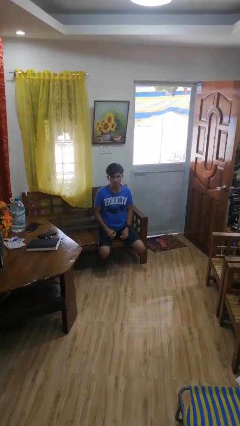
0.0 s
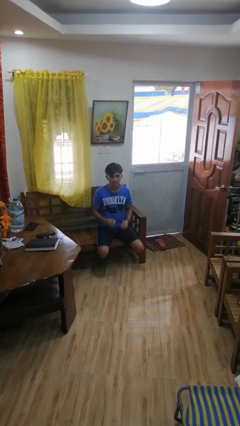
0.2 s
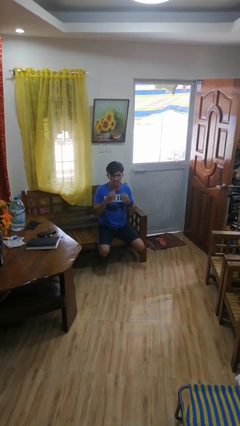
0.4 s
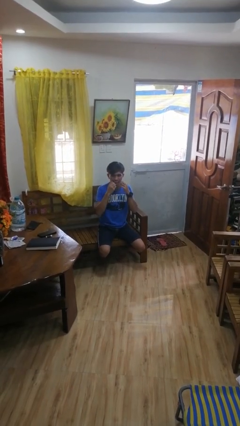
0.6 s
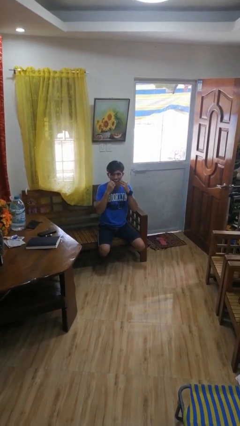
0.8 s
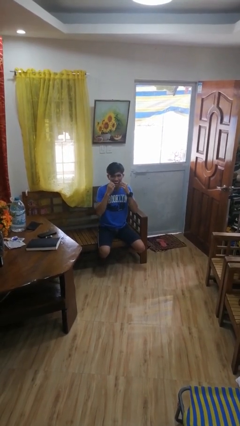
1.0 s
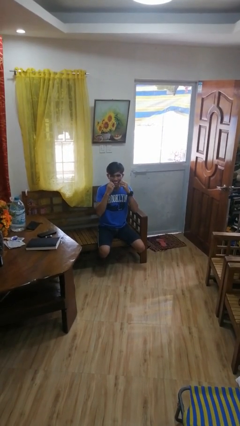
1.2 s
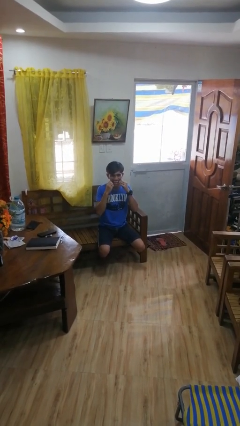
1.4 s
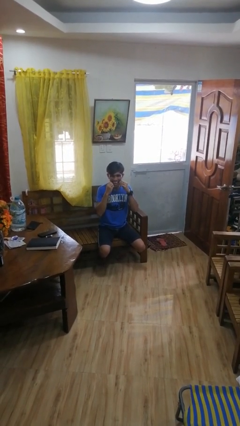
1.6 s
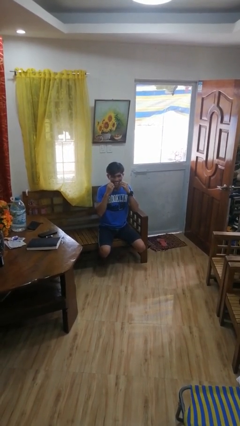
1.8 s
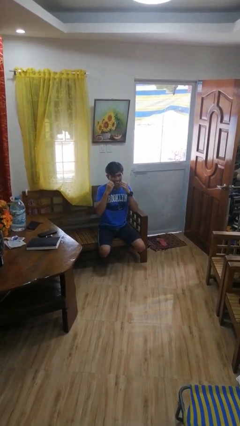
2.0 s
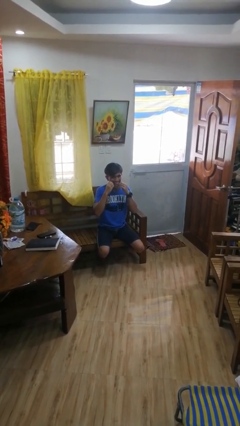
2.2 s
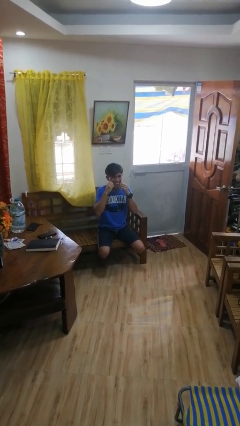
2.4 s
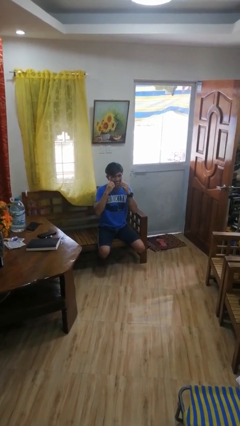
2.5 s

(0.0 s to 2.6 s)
person flosses

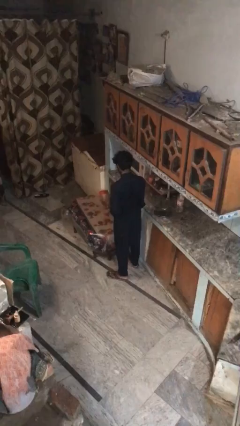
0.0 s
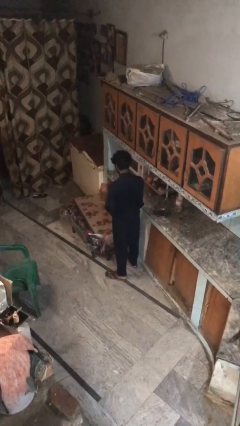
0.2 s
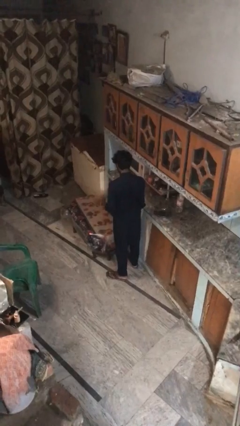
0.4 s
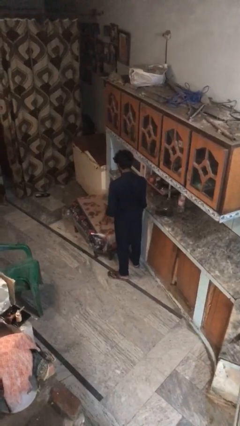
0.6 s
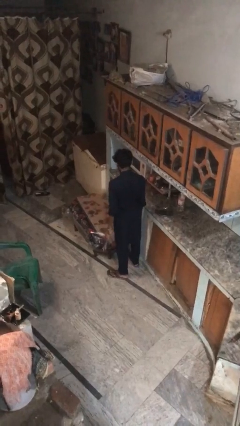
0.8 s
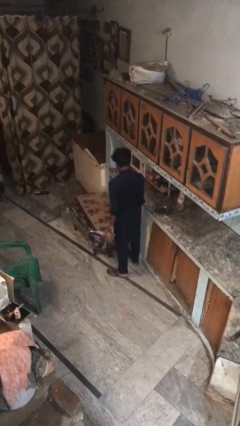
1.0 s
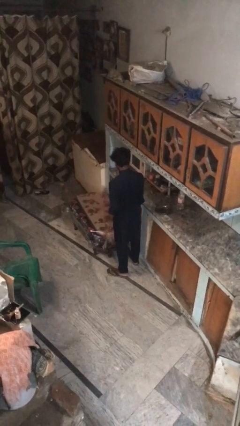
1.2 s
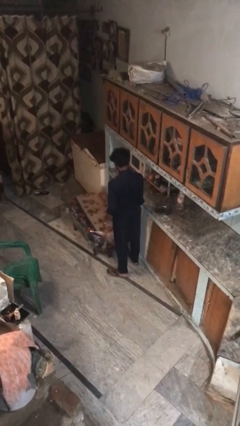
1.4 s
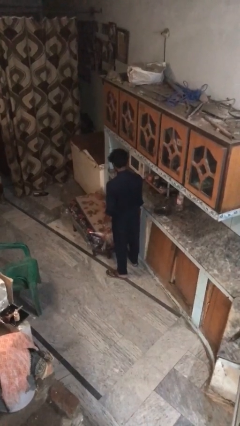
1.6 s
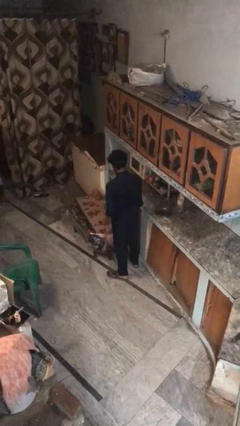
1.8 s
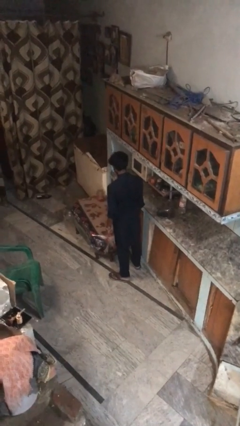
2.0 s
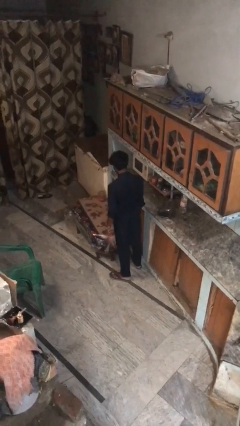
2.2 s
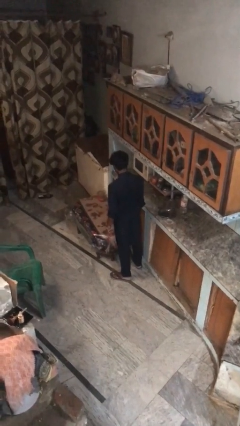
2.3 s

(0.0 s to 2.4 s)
person throws object on table

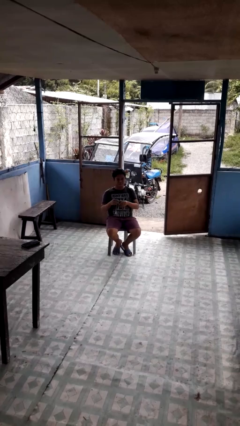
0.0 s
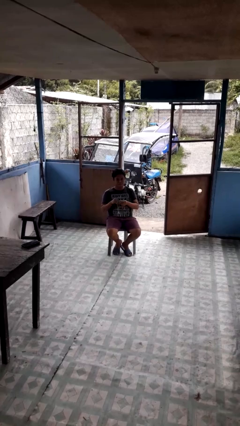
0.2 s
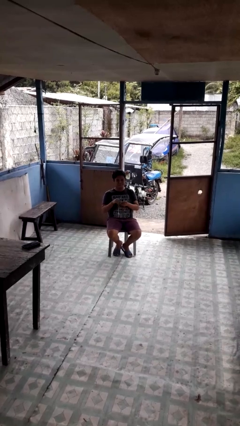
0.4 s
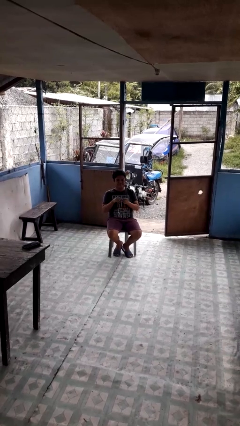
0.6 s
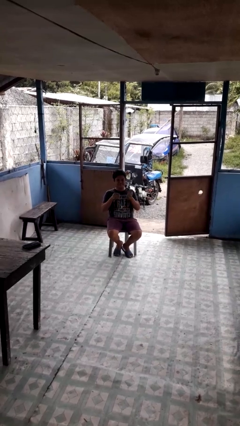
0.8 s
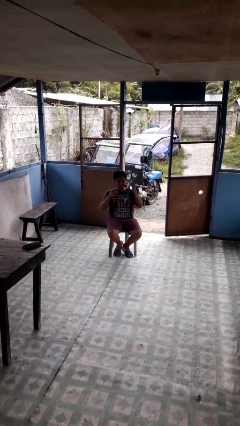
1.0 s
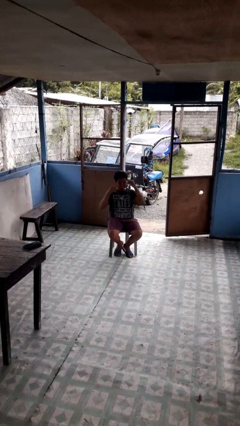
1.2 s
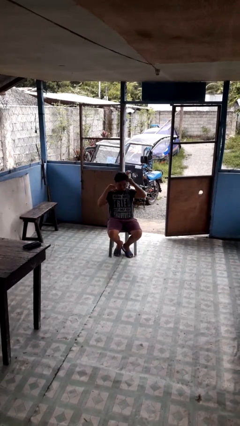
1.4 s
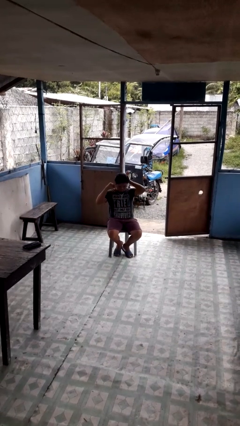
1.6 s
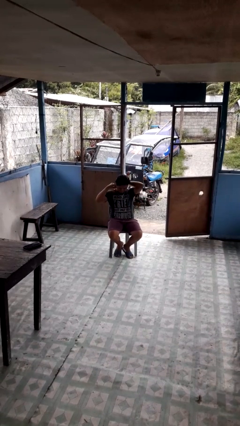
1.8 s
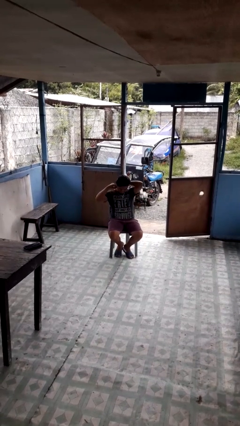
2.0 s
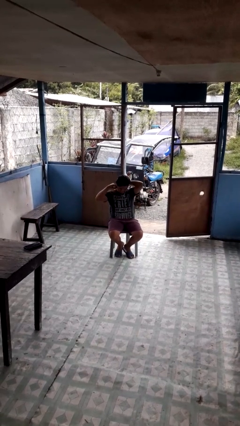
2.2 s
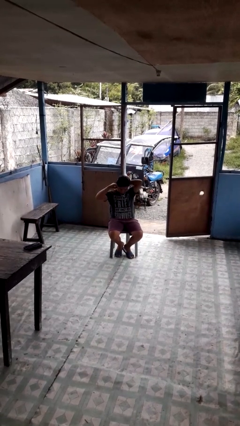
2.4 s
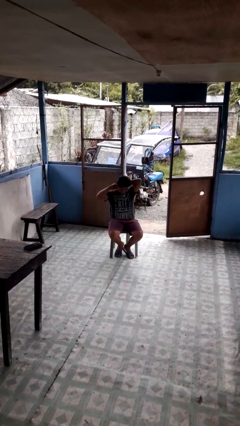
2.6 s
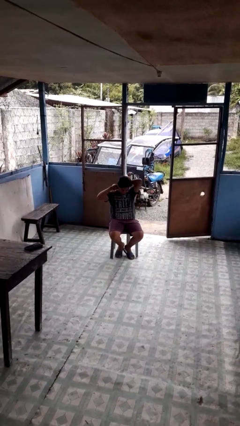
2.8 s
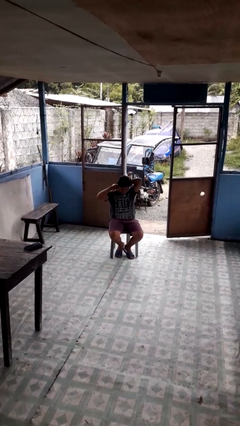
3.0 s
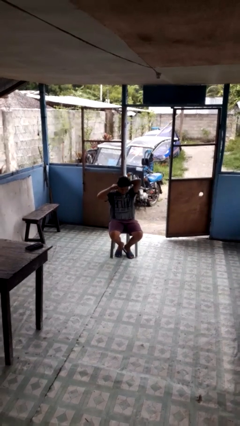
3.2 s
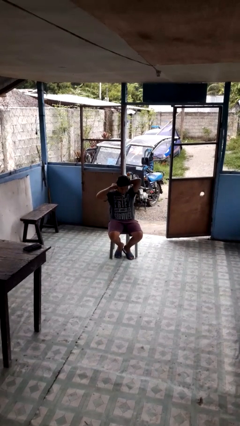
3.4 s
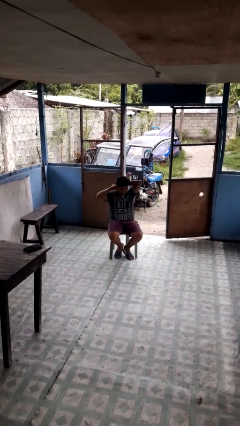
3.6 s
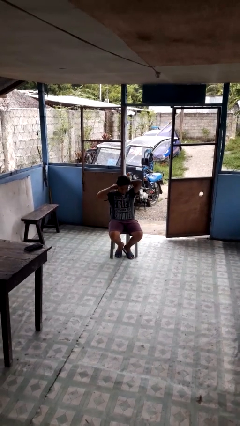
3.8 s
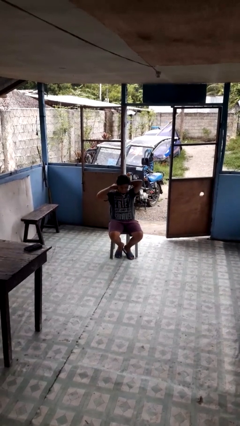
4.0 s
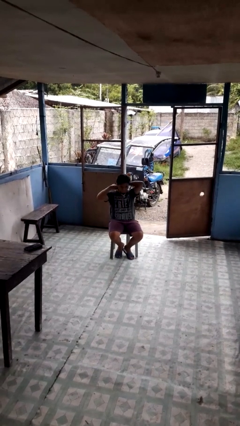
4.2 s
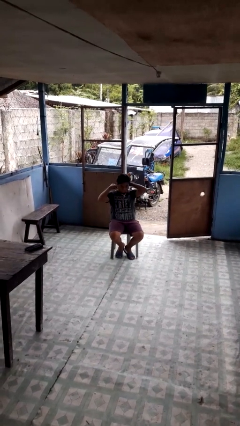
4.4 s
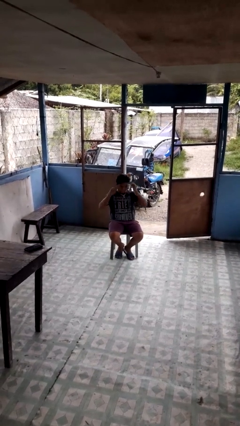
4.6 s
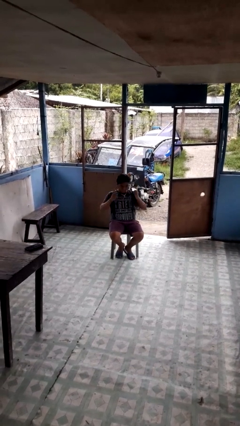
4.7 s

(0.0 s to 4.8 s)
person puts on necklace

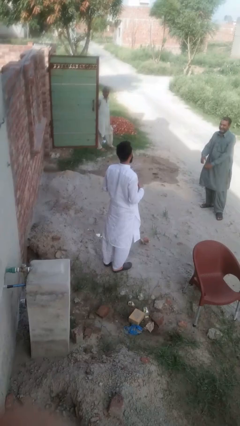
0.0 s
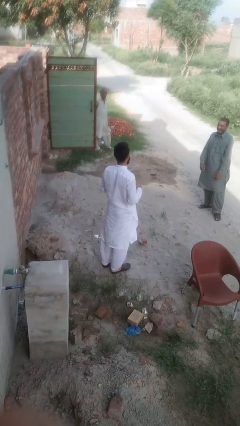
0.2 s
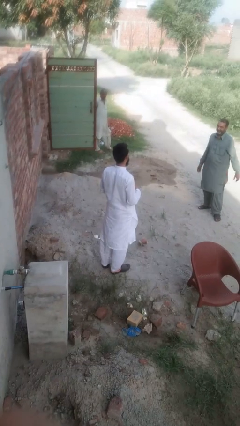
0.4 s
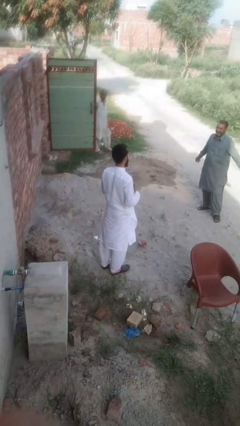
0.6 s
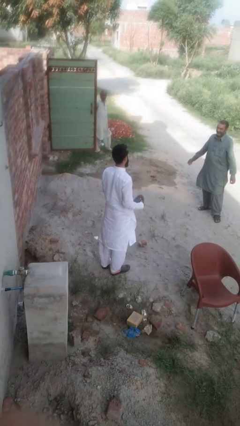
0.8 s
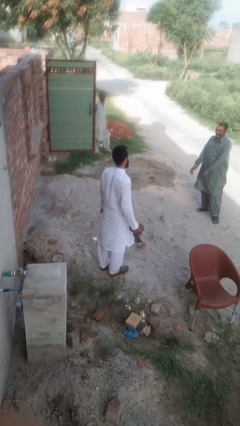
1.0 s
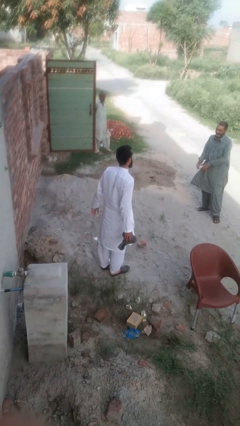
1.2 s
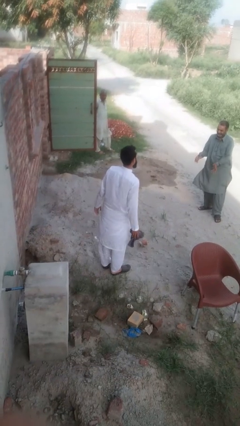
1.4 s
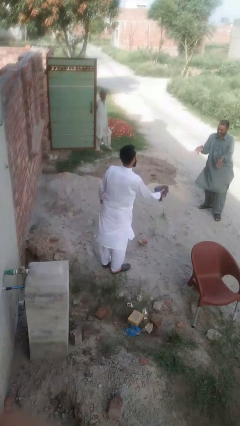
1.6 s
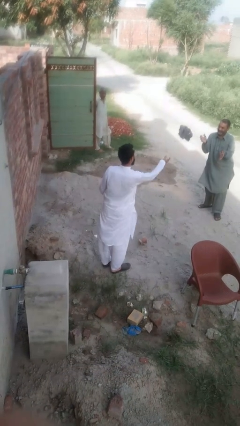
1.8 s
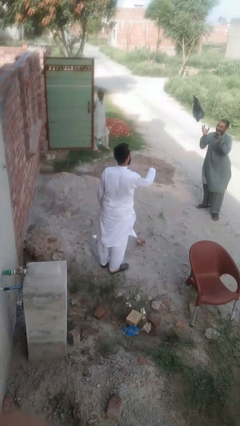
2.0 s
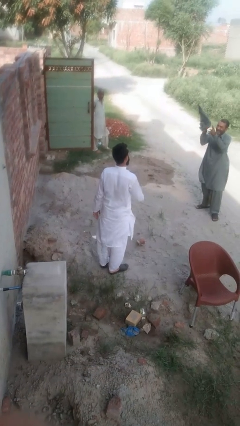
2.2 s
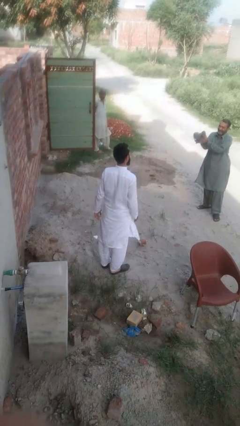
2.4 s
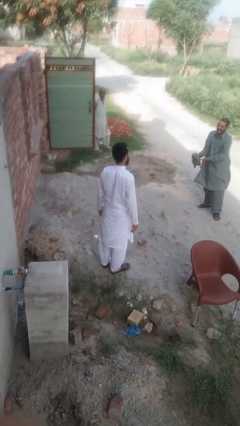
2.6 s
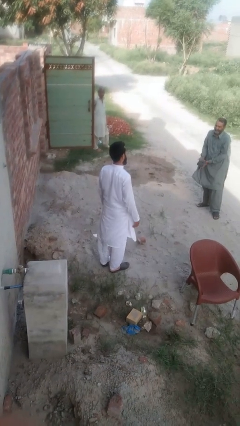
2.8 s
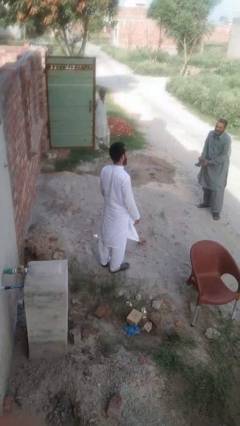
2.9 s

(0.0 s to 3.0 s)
person throws object to person

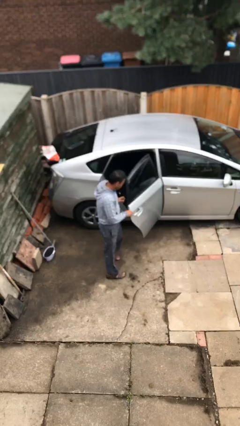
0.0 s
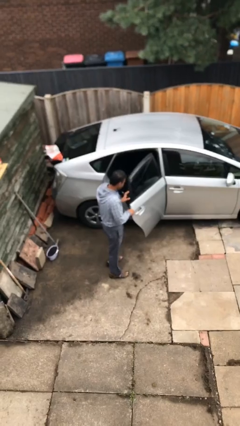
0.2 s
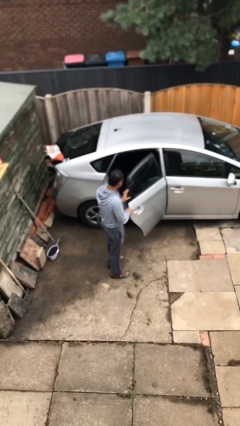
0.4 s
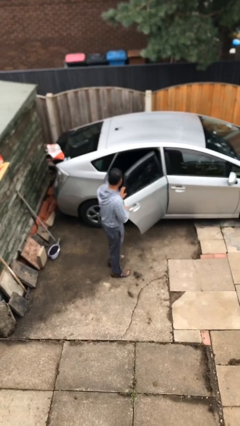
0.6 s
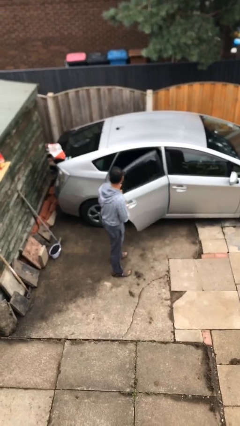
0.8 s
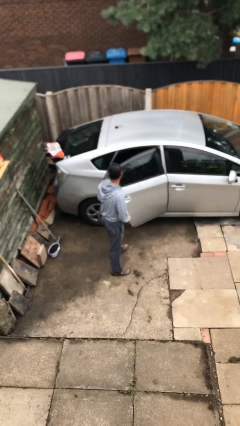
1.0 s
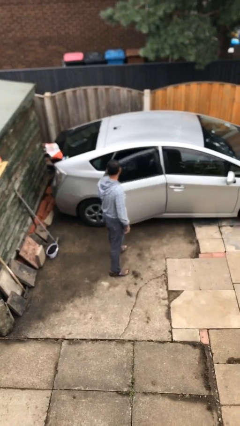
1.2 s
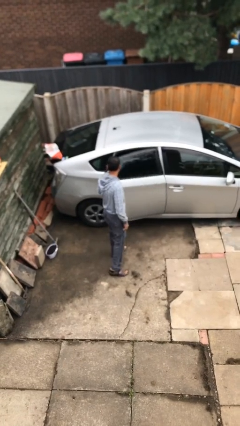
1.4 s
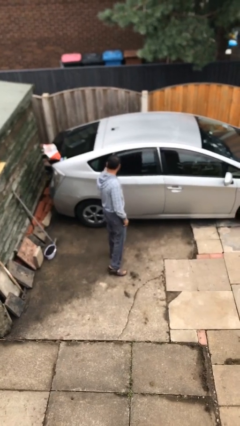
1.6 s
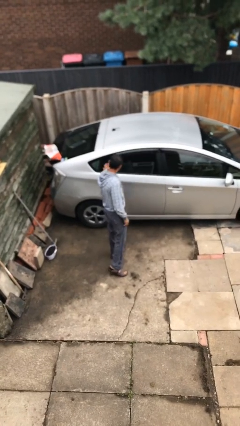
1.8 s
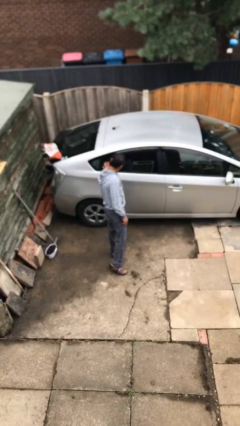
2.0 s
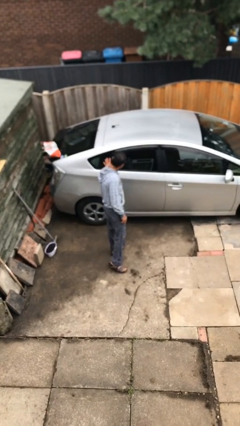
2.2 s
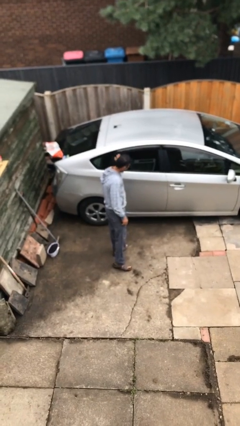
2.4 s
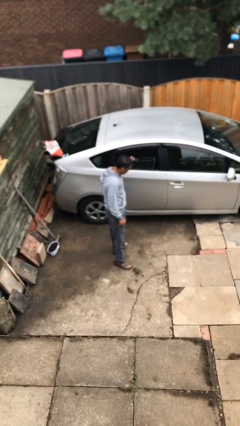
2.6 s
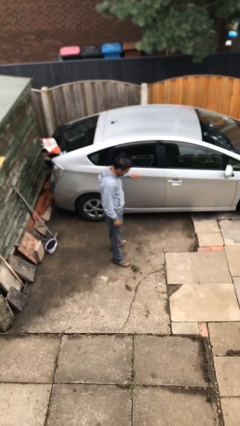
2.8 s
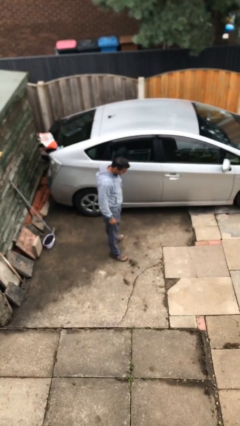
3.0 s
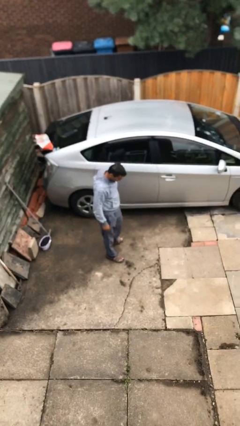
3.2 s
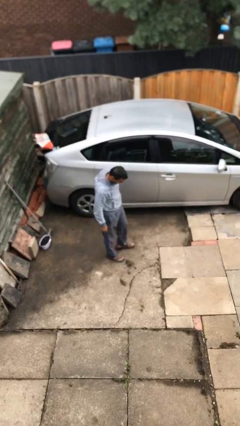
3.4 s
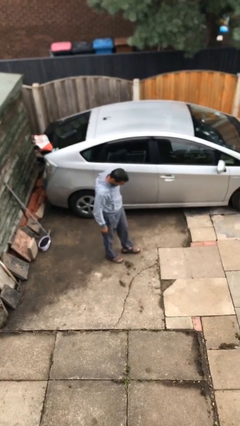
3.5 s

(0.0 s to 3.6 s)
person closes car door

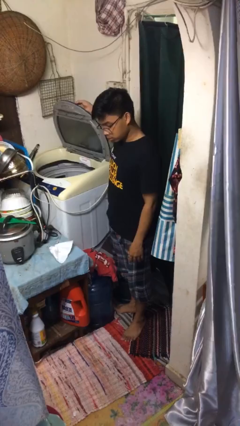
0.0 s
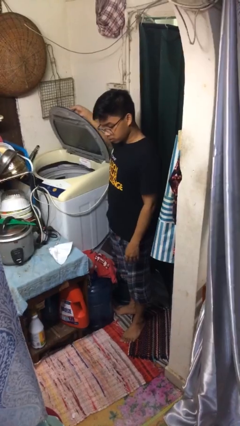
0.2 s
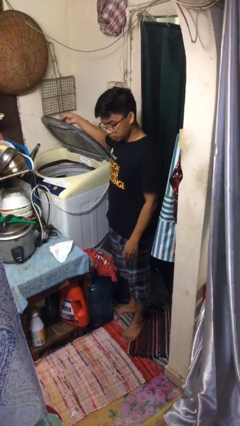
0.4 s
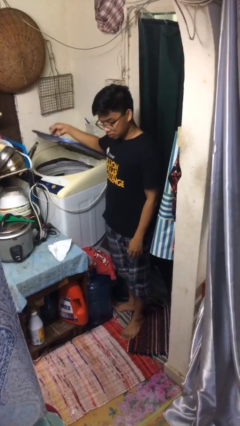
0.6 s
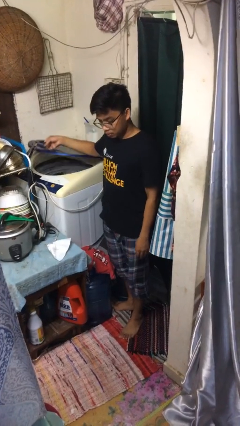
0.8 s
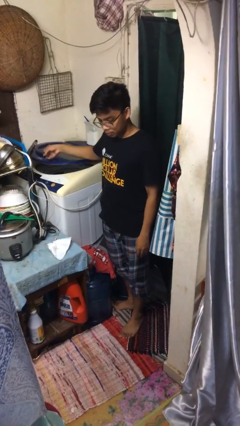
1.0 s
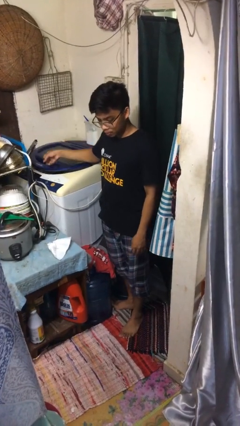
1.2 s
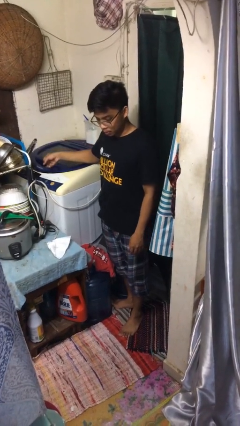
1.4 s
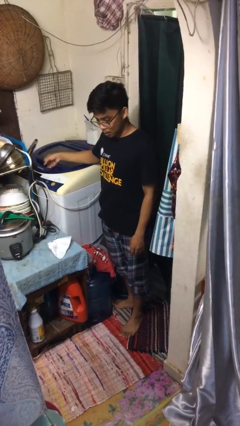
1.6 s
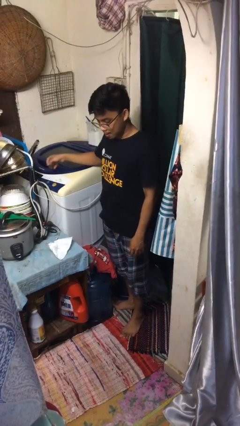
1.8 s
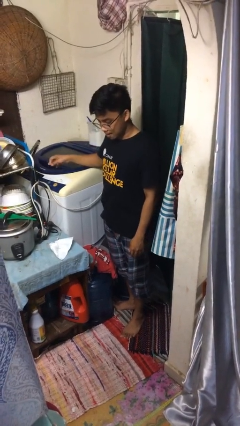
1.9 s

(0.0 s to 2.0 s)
person closes clothes washer
